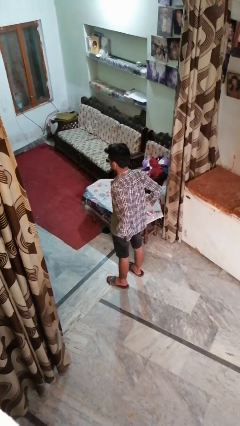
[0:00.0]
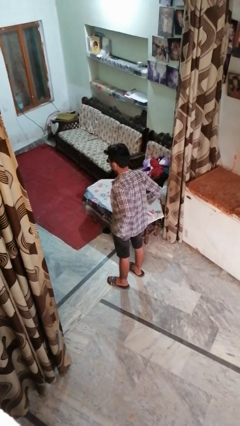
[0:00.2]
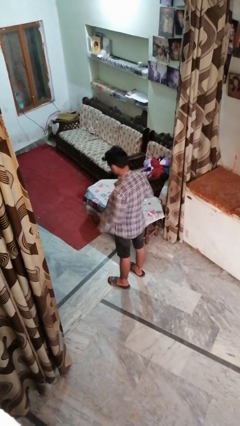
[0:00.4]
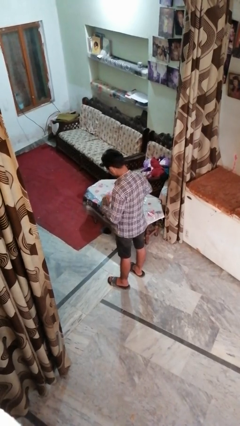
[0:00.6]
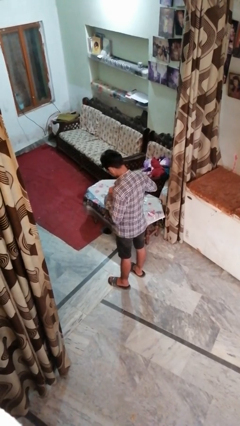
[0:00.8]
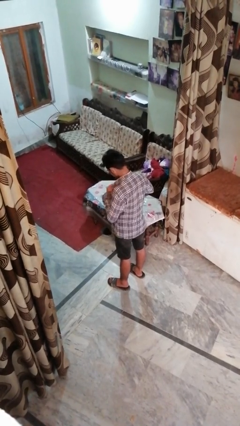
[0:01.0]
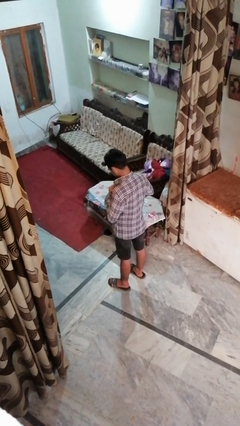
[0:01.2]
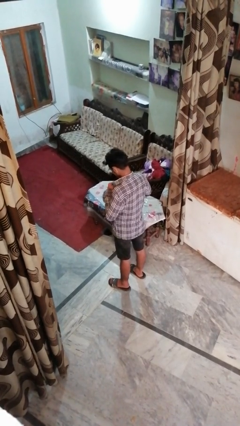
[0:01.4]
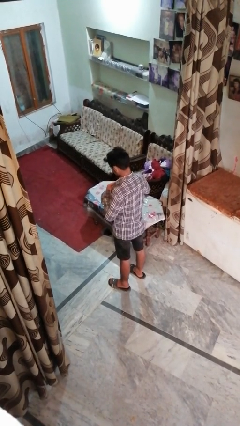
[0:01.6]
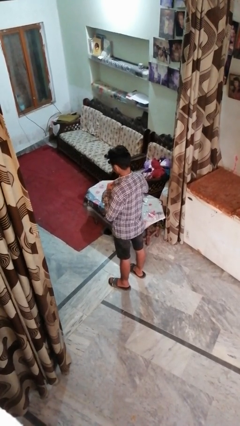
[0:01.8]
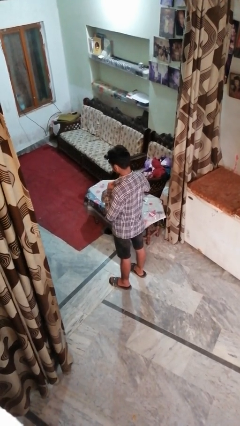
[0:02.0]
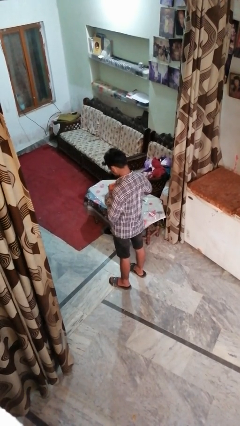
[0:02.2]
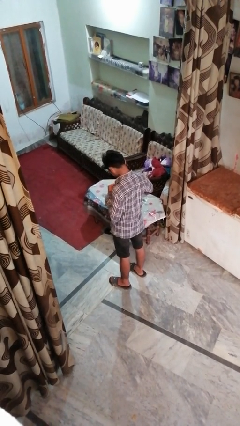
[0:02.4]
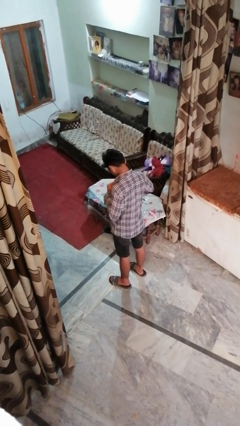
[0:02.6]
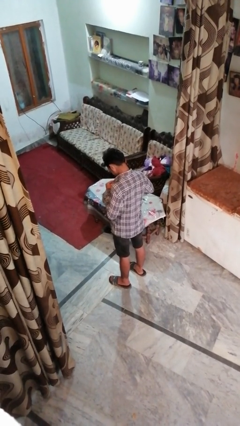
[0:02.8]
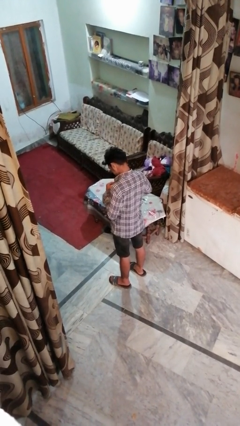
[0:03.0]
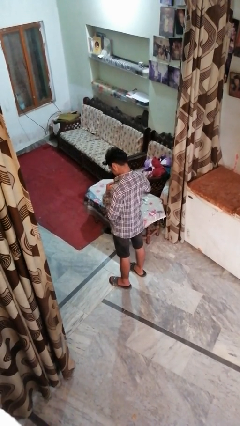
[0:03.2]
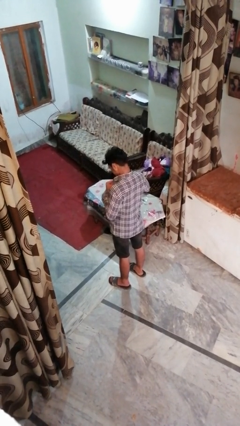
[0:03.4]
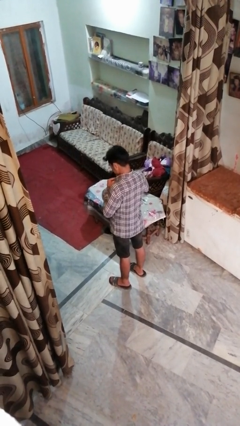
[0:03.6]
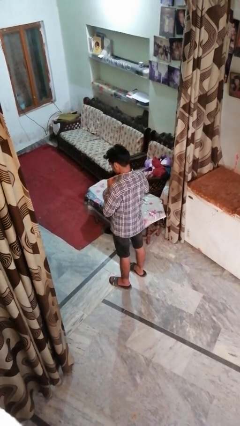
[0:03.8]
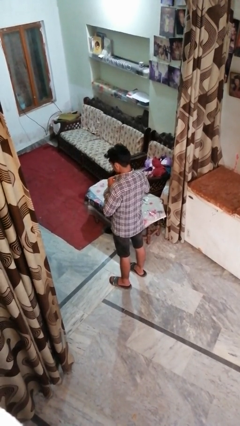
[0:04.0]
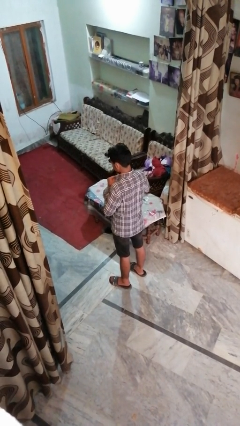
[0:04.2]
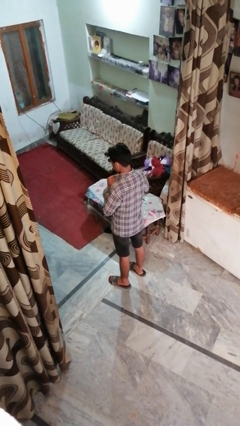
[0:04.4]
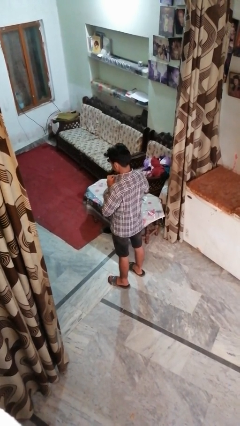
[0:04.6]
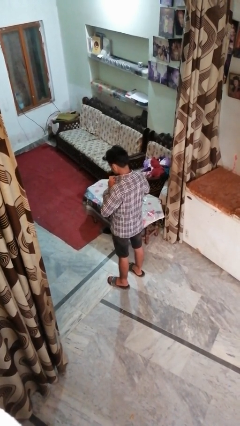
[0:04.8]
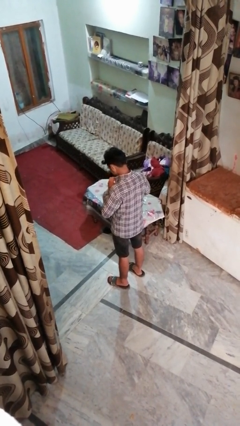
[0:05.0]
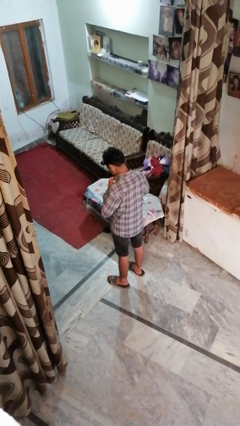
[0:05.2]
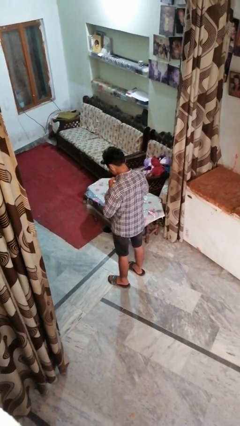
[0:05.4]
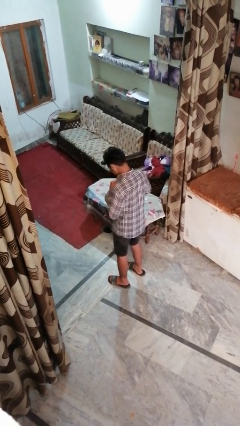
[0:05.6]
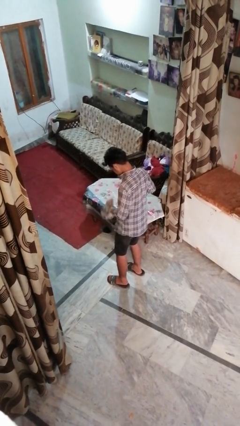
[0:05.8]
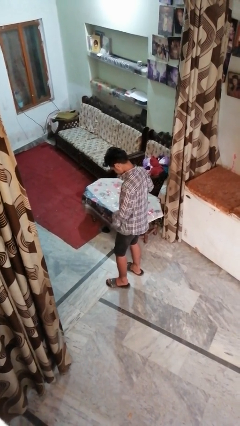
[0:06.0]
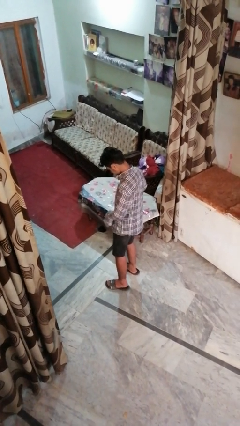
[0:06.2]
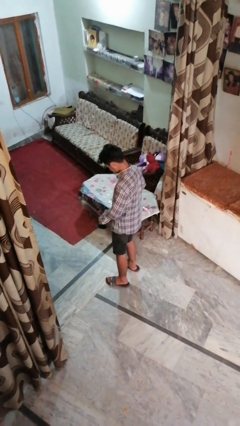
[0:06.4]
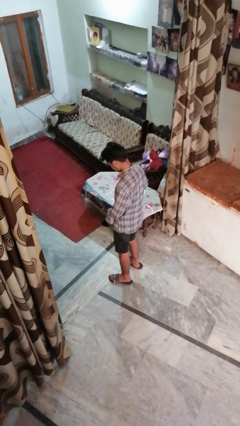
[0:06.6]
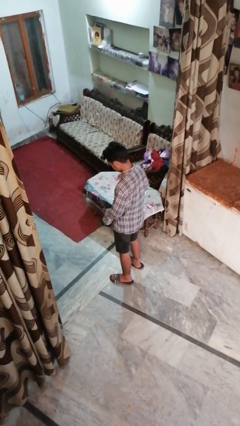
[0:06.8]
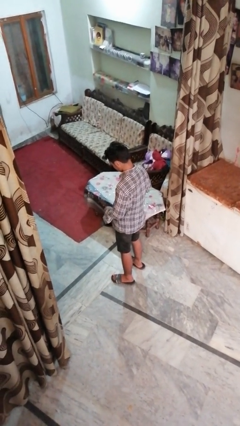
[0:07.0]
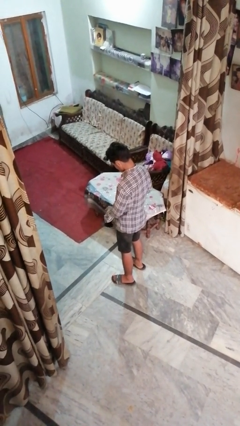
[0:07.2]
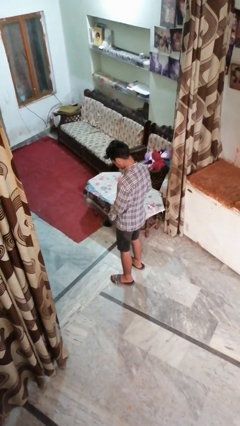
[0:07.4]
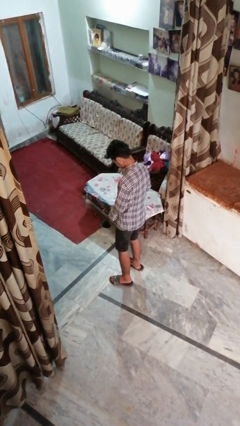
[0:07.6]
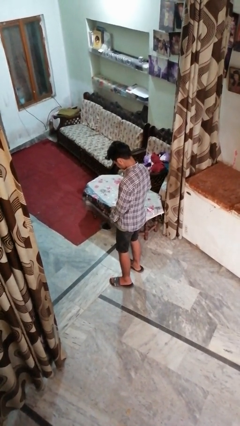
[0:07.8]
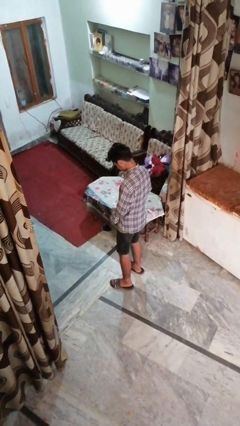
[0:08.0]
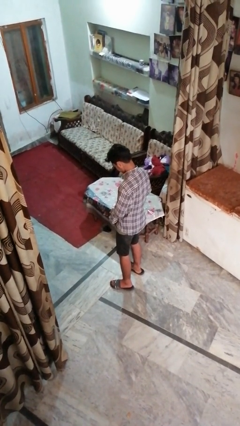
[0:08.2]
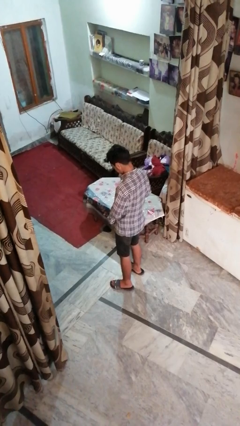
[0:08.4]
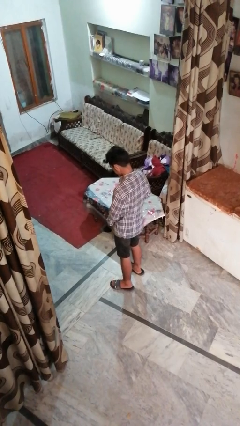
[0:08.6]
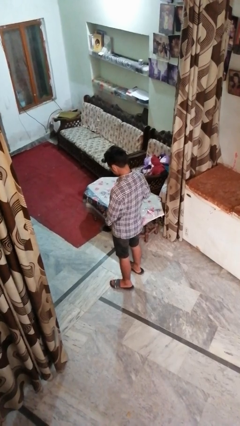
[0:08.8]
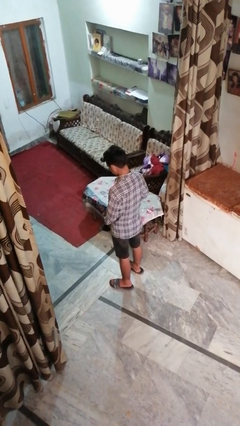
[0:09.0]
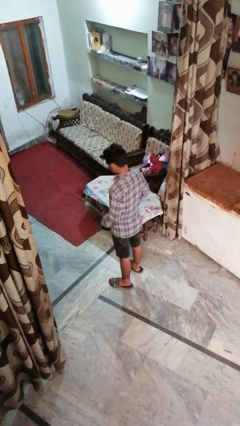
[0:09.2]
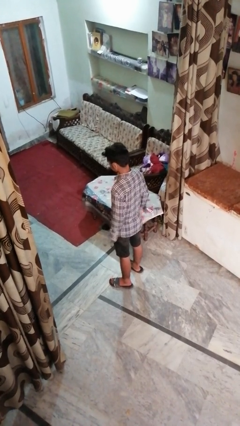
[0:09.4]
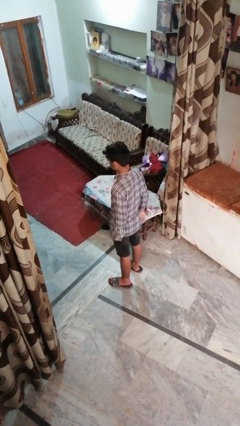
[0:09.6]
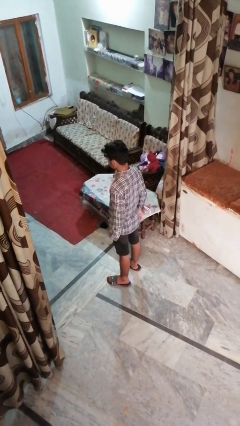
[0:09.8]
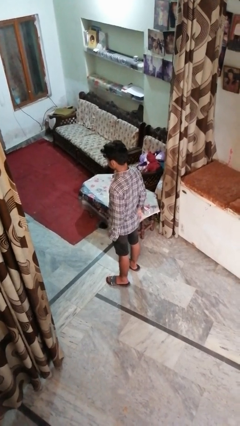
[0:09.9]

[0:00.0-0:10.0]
person buttons shirt

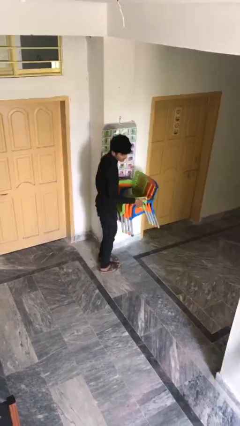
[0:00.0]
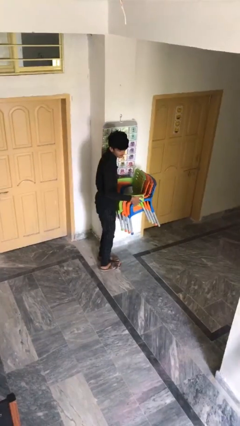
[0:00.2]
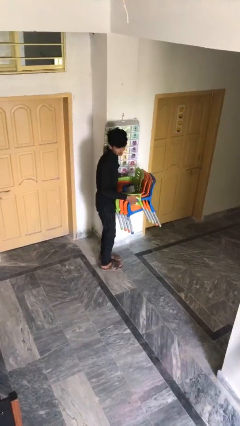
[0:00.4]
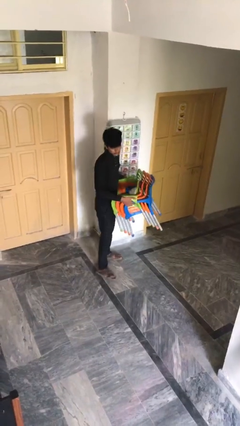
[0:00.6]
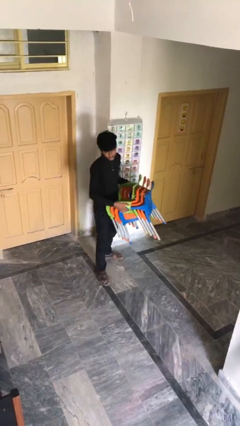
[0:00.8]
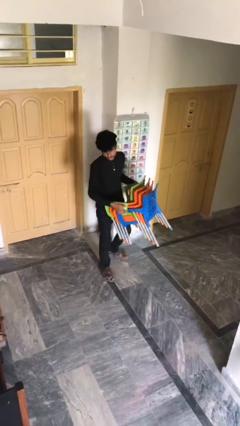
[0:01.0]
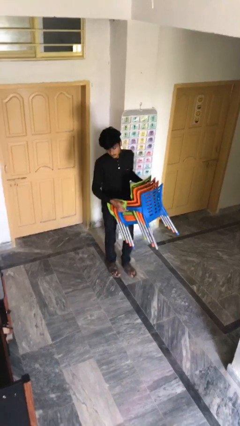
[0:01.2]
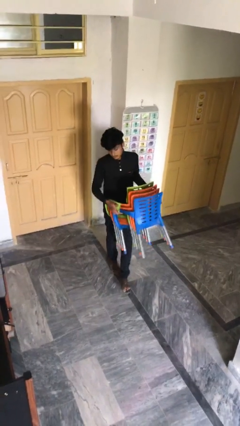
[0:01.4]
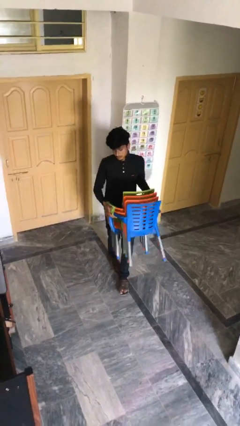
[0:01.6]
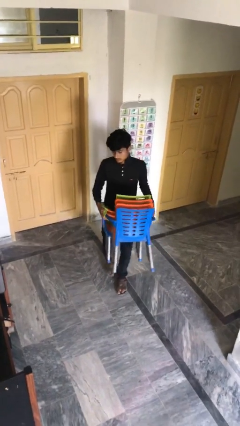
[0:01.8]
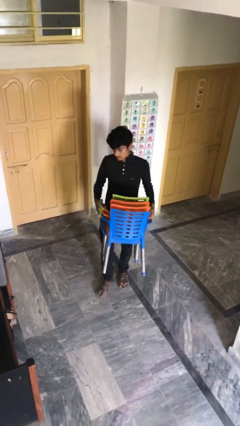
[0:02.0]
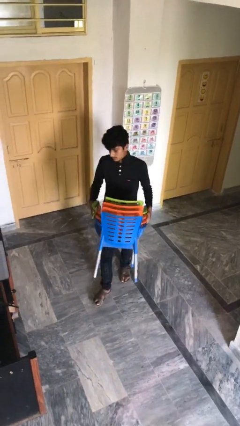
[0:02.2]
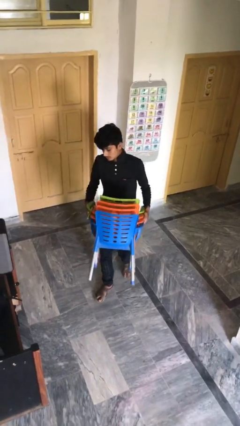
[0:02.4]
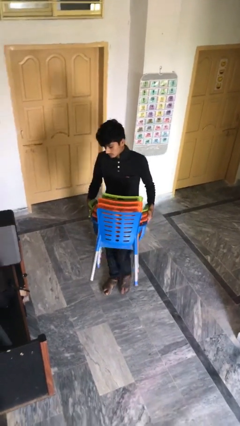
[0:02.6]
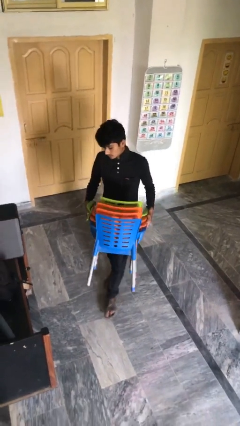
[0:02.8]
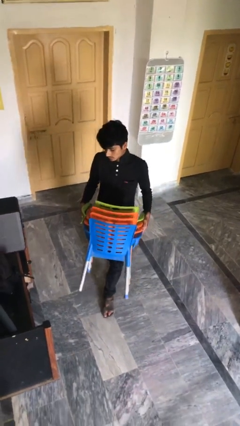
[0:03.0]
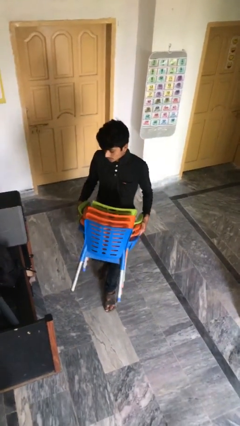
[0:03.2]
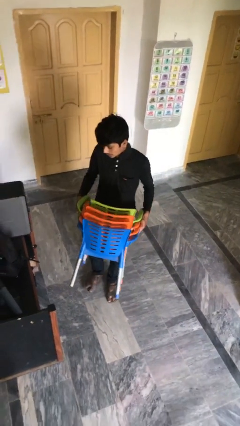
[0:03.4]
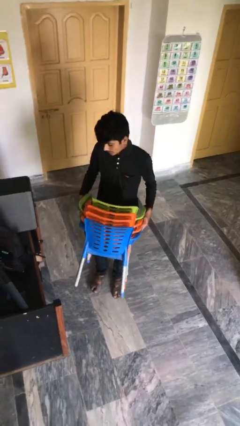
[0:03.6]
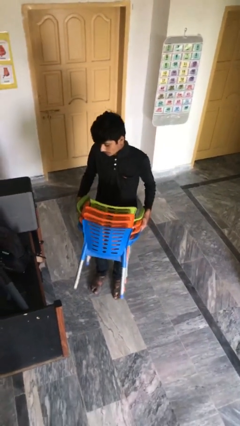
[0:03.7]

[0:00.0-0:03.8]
person carries heavy object

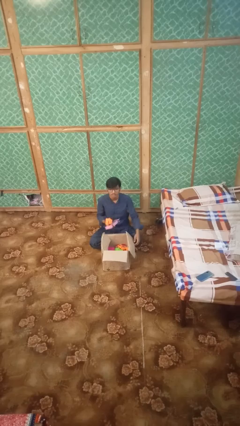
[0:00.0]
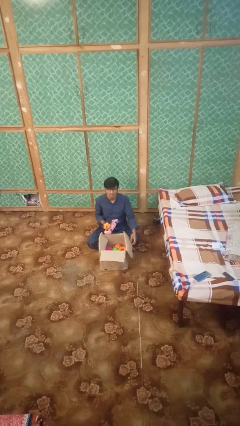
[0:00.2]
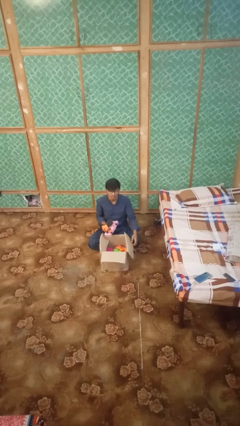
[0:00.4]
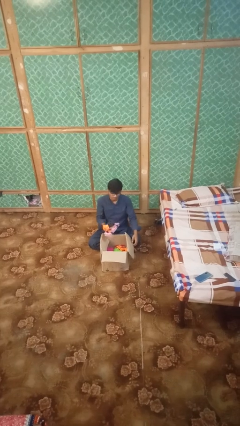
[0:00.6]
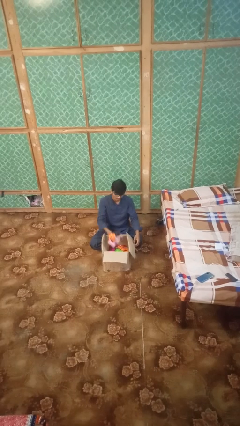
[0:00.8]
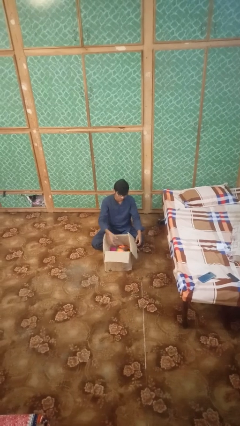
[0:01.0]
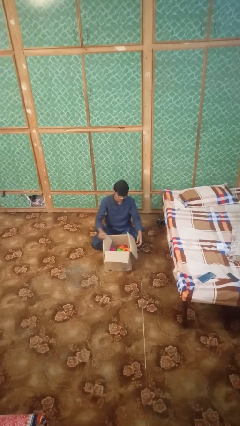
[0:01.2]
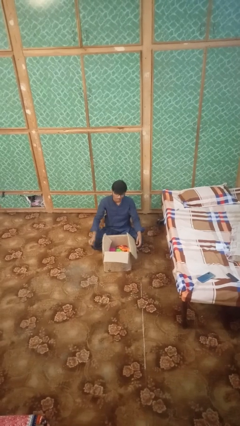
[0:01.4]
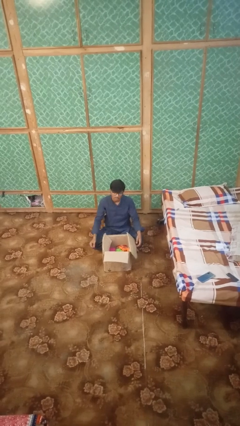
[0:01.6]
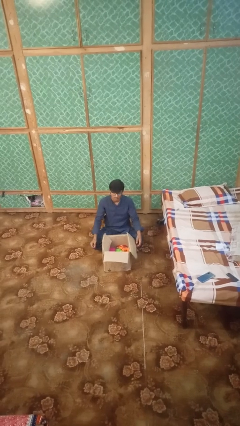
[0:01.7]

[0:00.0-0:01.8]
person puts object into box

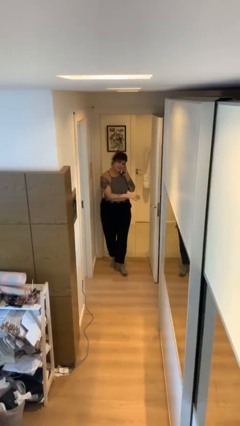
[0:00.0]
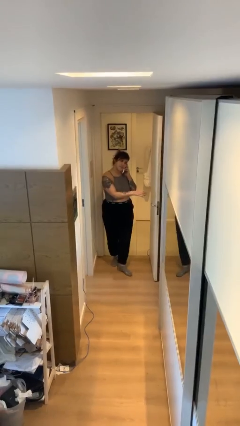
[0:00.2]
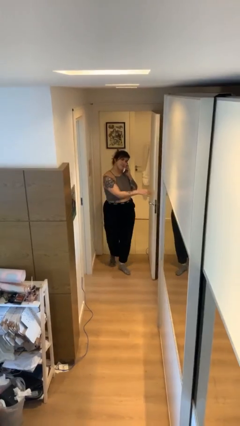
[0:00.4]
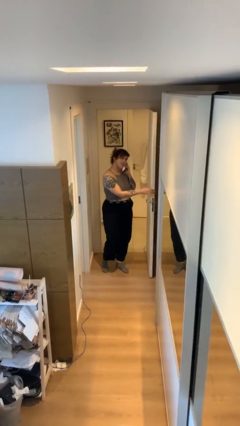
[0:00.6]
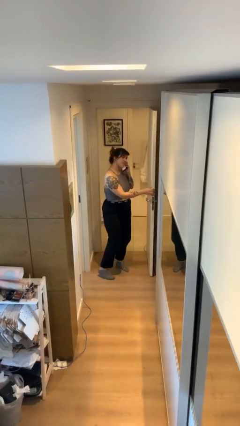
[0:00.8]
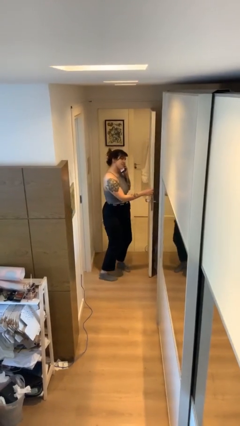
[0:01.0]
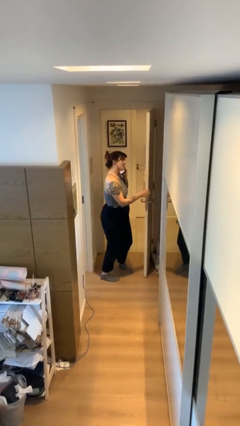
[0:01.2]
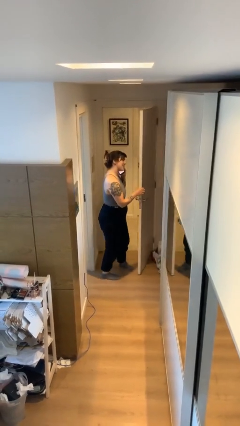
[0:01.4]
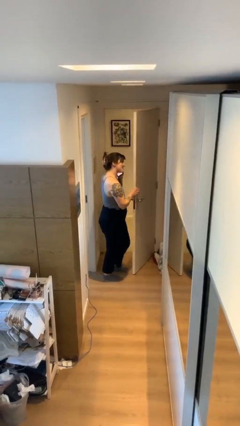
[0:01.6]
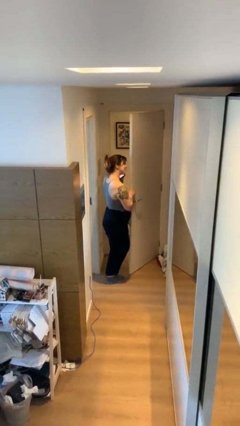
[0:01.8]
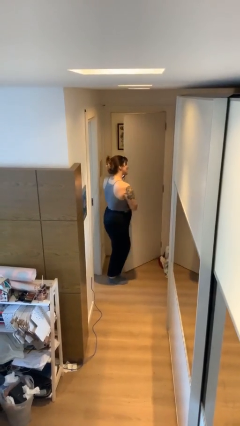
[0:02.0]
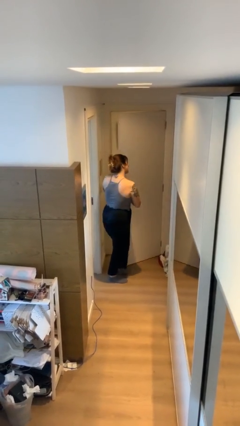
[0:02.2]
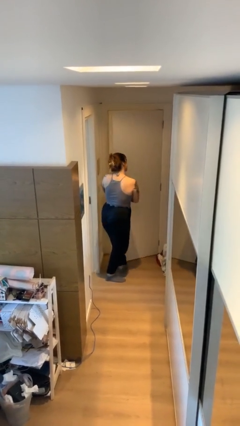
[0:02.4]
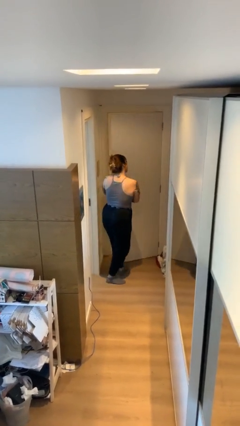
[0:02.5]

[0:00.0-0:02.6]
person enters scene through structure

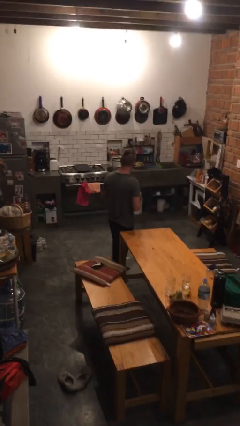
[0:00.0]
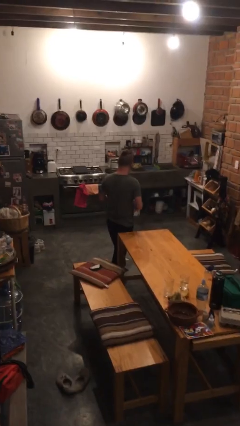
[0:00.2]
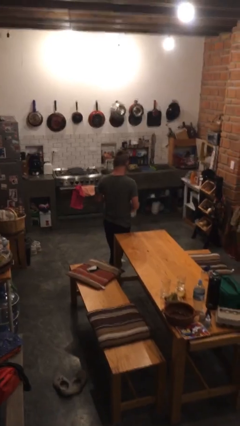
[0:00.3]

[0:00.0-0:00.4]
person hugs stuffed animal
